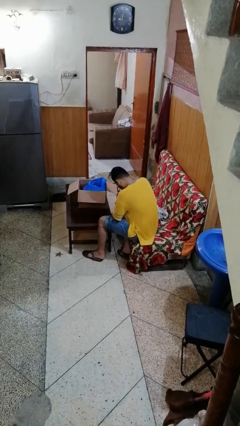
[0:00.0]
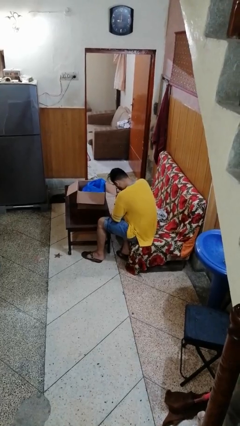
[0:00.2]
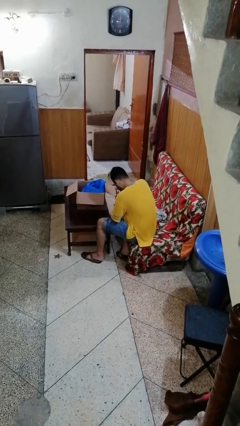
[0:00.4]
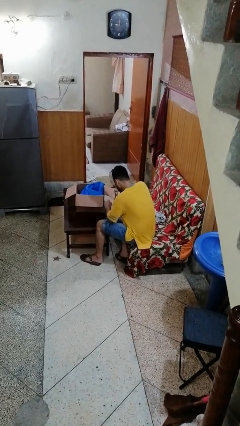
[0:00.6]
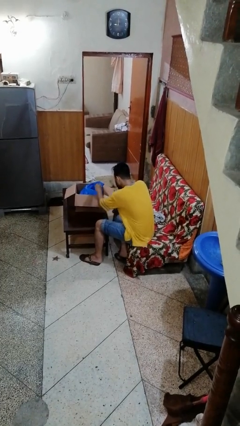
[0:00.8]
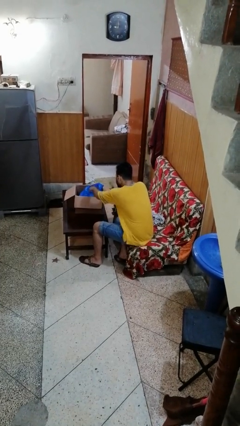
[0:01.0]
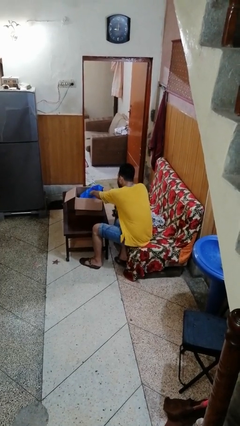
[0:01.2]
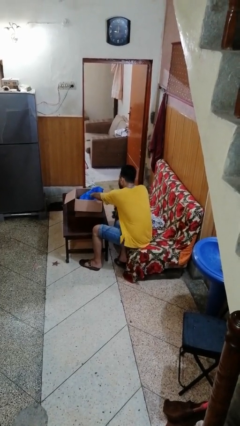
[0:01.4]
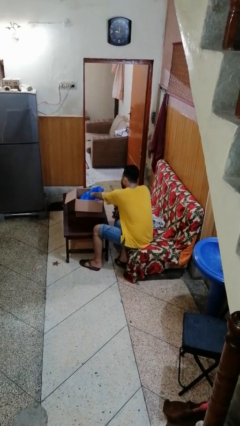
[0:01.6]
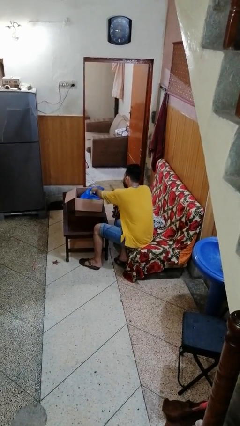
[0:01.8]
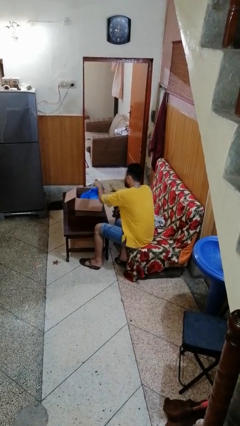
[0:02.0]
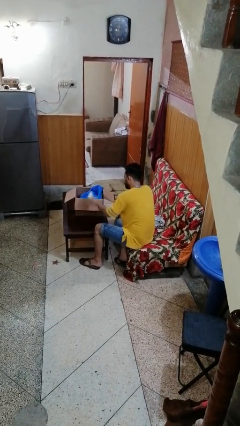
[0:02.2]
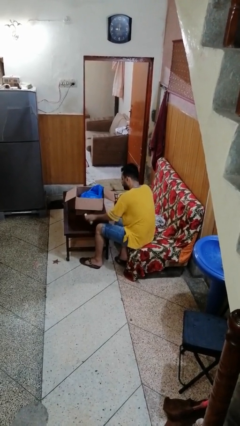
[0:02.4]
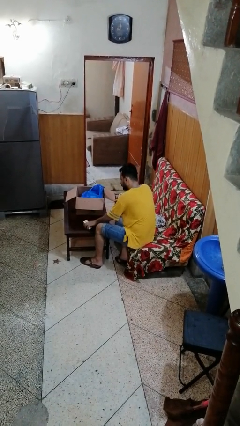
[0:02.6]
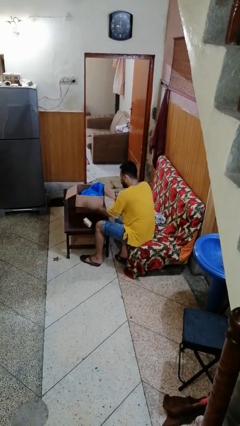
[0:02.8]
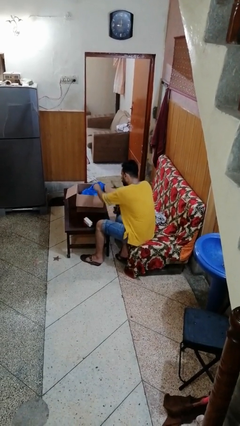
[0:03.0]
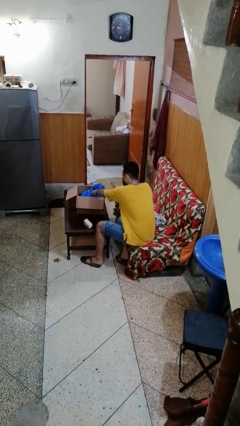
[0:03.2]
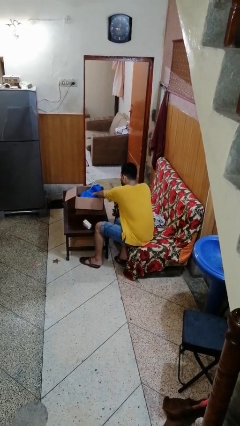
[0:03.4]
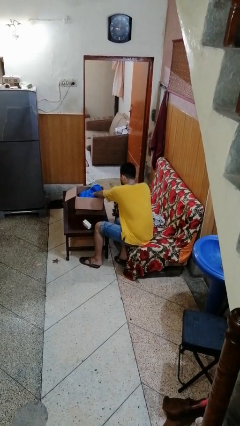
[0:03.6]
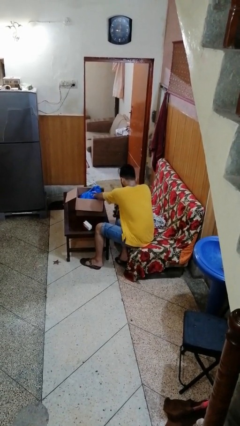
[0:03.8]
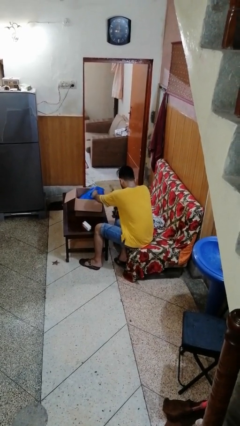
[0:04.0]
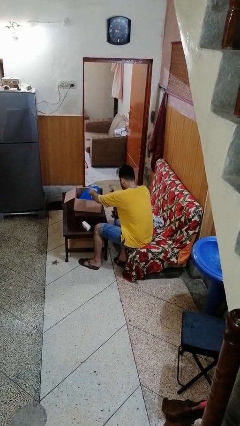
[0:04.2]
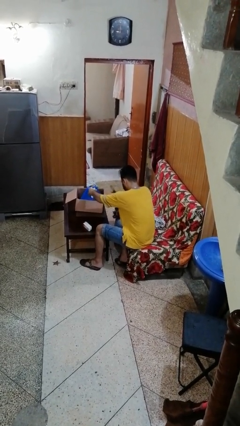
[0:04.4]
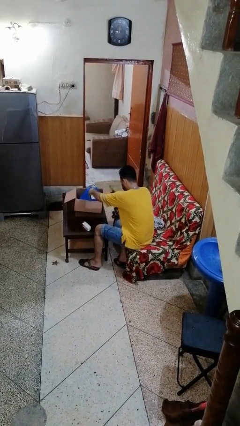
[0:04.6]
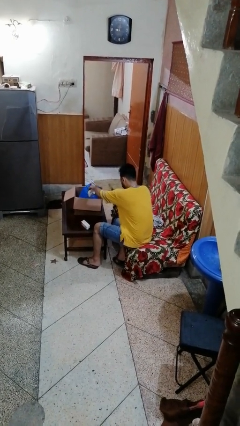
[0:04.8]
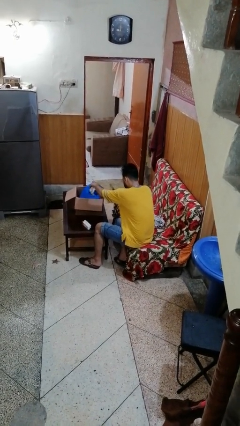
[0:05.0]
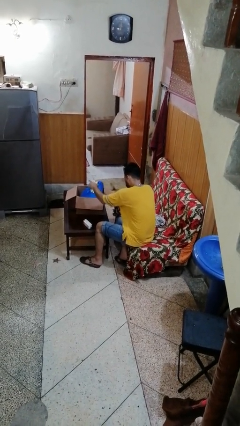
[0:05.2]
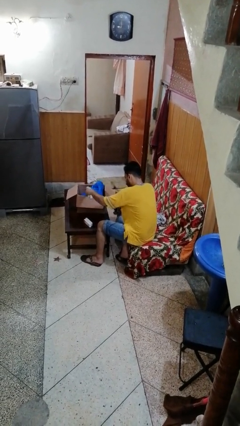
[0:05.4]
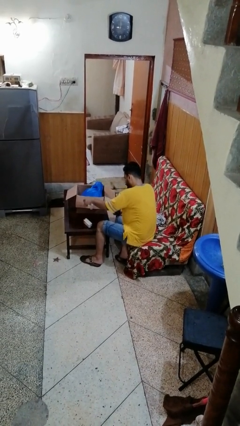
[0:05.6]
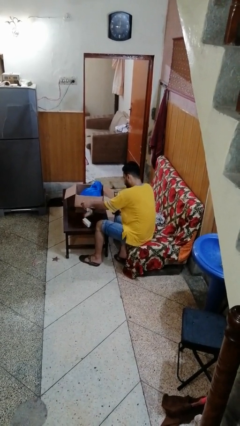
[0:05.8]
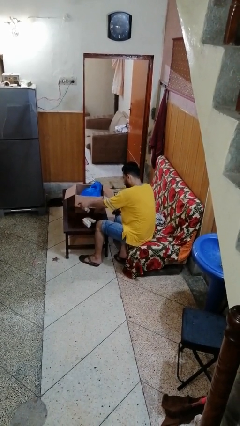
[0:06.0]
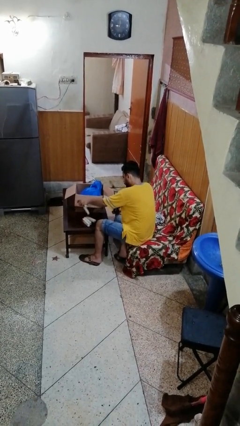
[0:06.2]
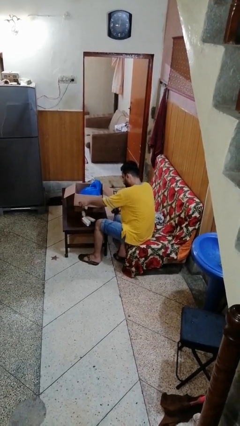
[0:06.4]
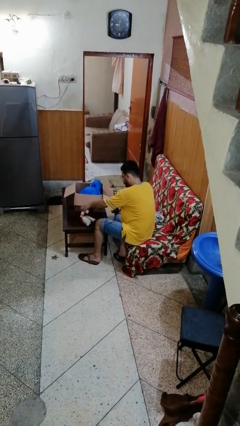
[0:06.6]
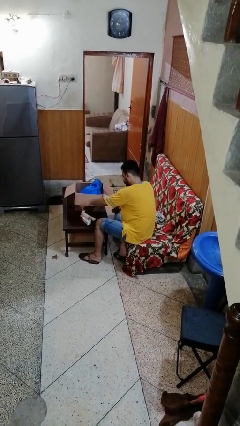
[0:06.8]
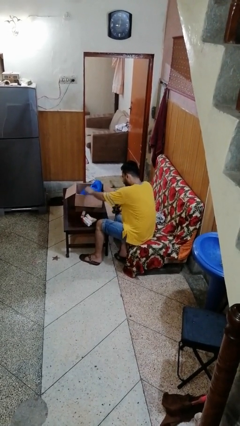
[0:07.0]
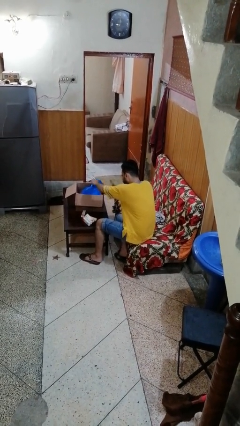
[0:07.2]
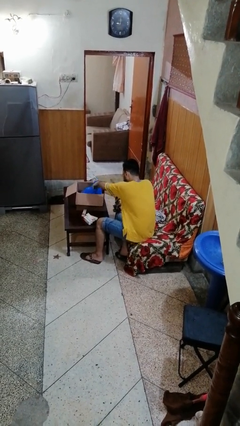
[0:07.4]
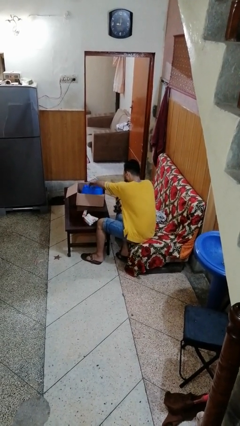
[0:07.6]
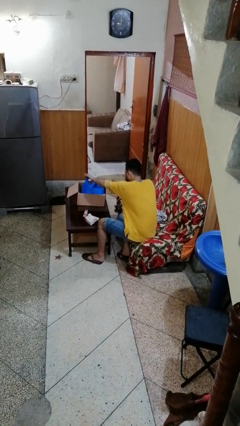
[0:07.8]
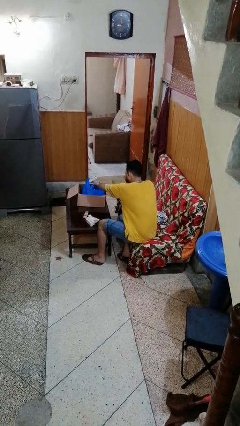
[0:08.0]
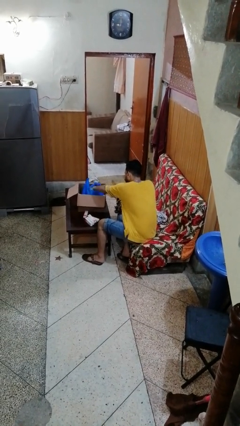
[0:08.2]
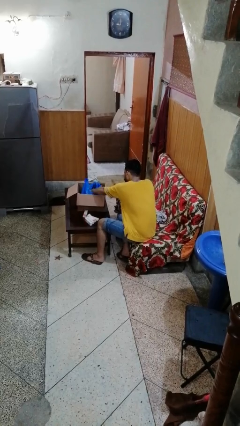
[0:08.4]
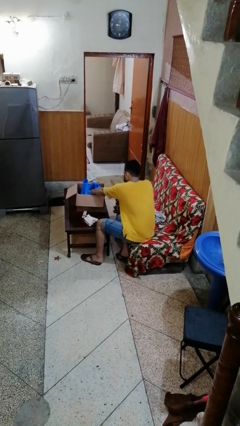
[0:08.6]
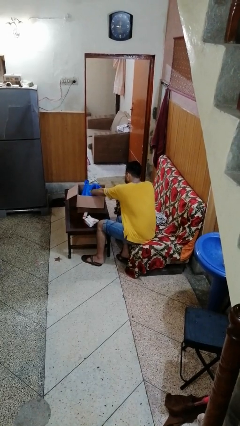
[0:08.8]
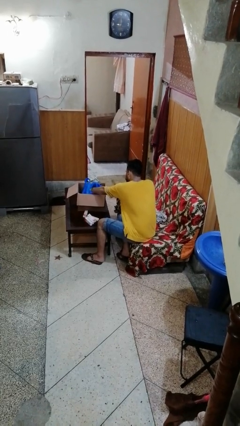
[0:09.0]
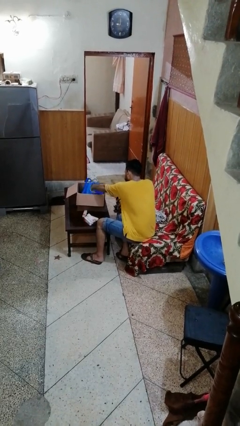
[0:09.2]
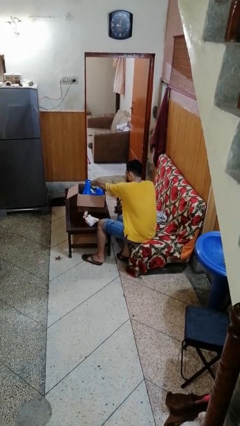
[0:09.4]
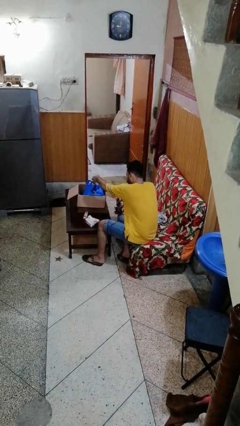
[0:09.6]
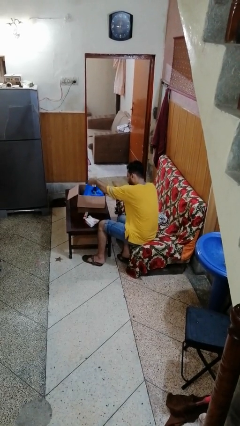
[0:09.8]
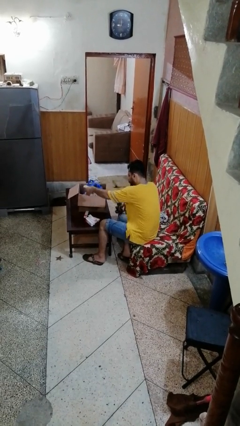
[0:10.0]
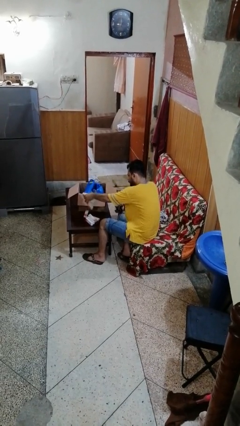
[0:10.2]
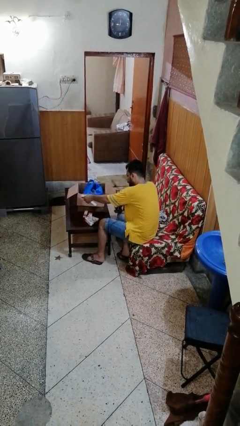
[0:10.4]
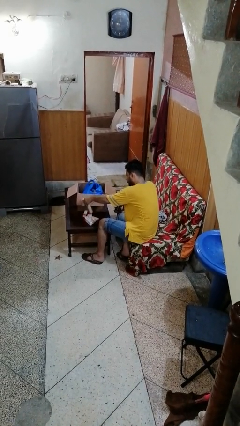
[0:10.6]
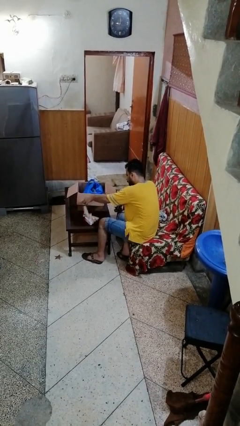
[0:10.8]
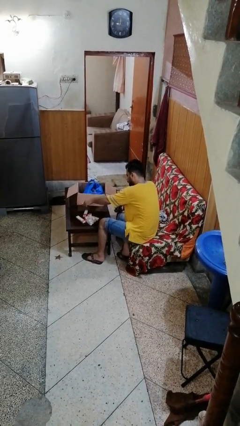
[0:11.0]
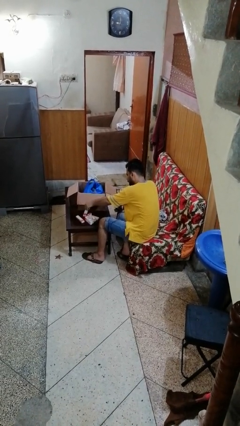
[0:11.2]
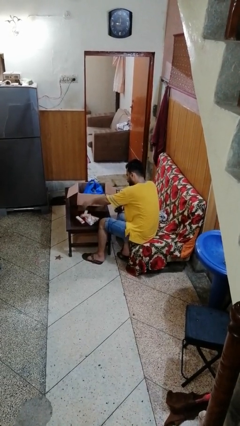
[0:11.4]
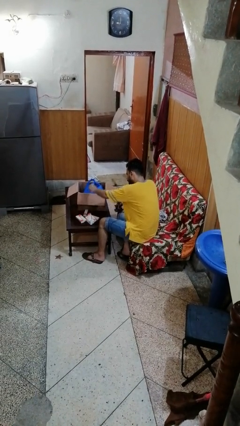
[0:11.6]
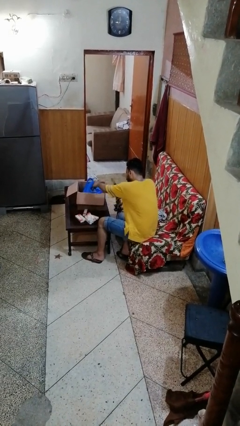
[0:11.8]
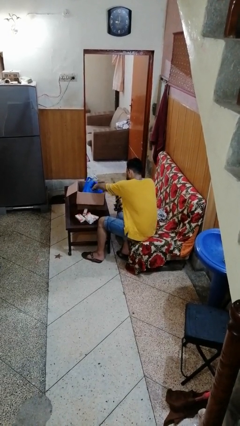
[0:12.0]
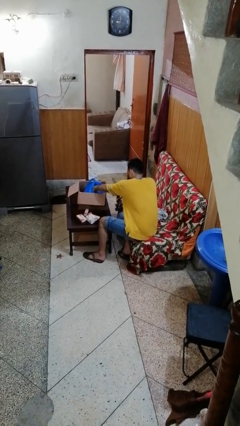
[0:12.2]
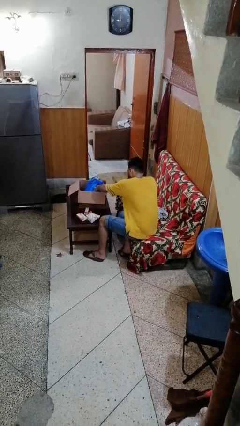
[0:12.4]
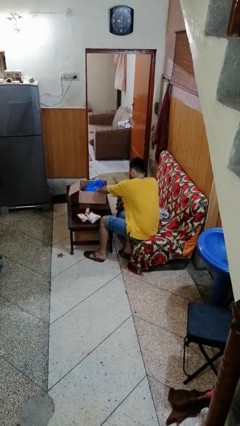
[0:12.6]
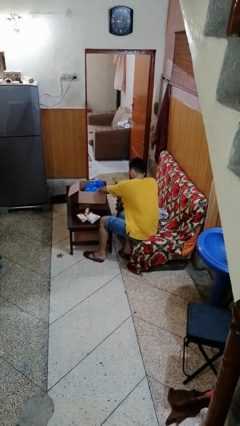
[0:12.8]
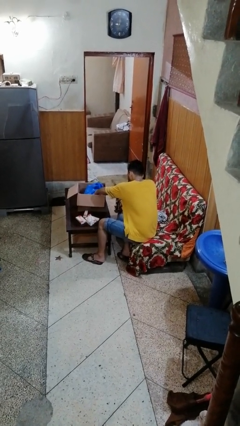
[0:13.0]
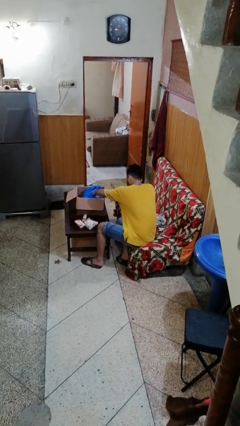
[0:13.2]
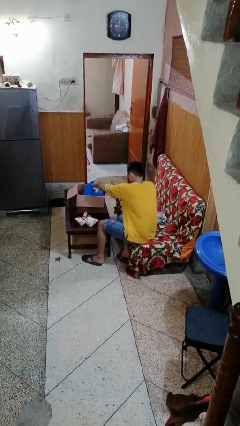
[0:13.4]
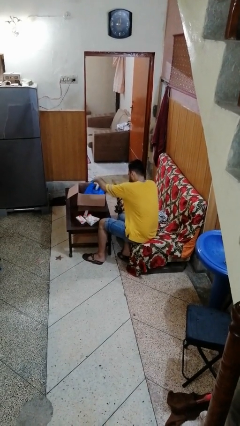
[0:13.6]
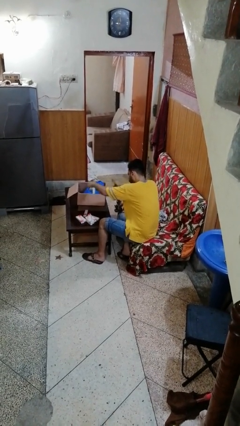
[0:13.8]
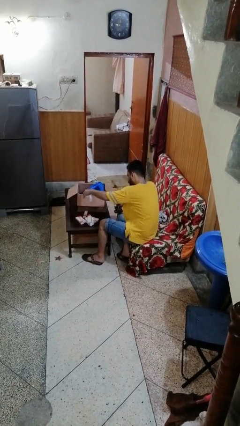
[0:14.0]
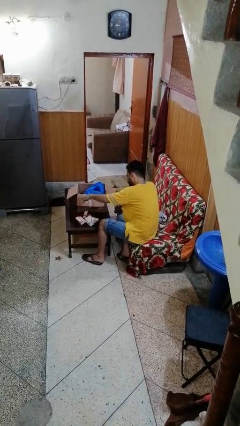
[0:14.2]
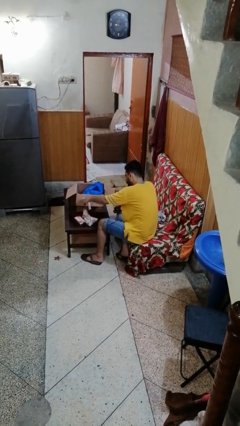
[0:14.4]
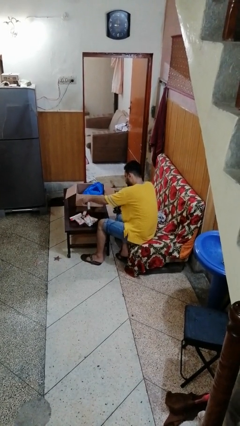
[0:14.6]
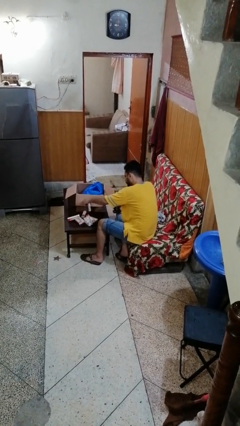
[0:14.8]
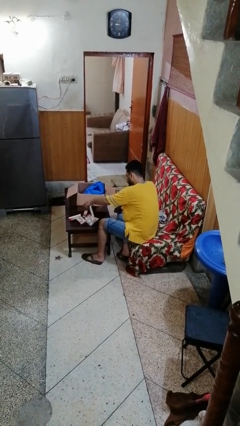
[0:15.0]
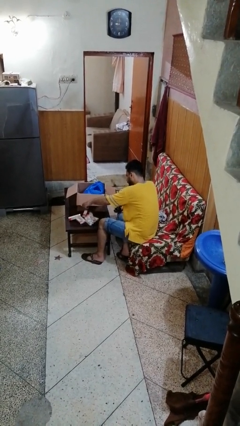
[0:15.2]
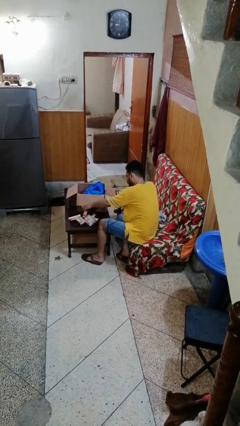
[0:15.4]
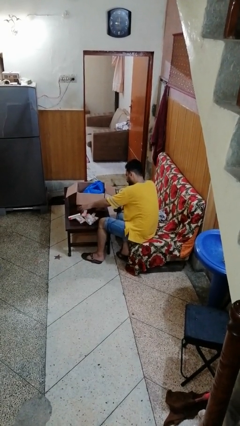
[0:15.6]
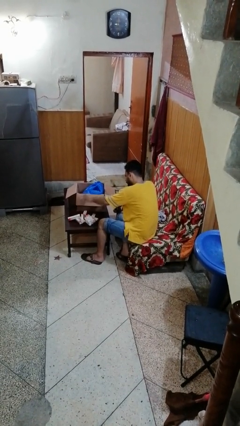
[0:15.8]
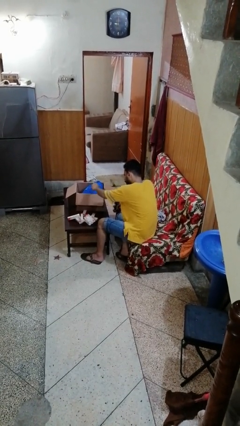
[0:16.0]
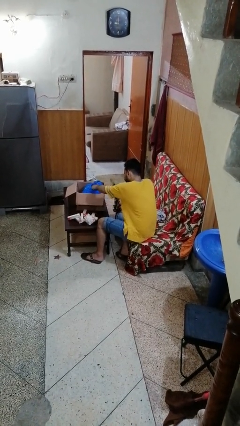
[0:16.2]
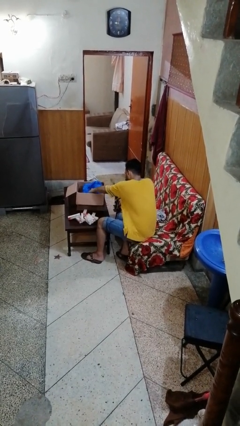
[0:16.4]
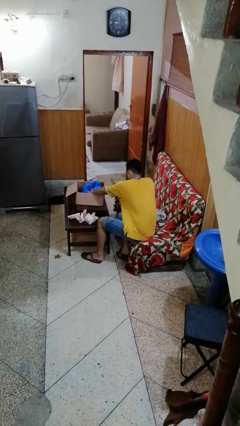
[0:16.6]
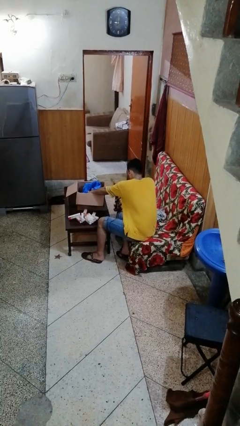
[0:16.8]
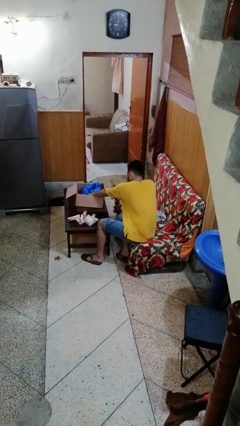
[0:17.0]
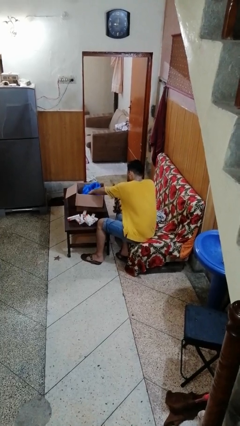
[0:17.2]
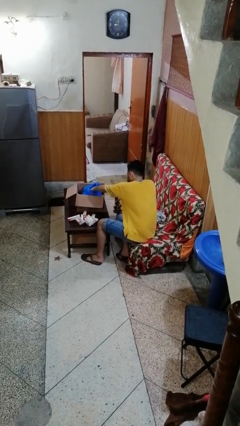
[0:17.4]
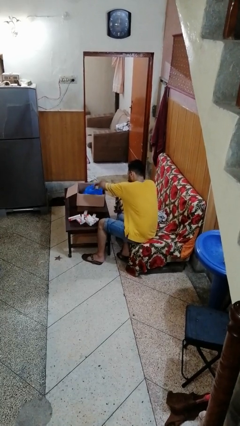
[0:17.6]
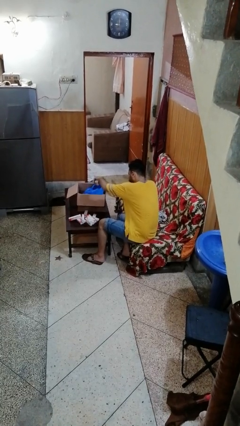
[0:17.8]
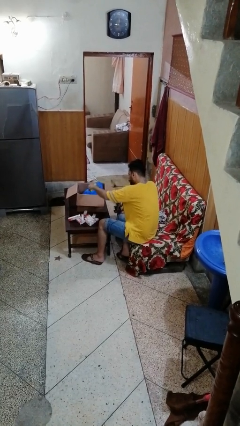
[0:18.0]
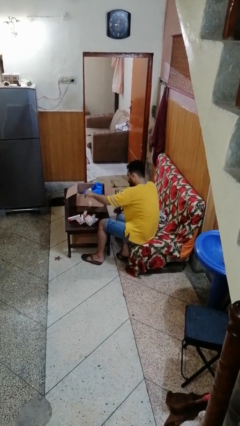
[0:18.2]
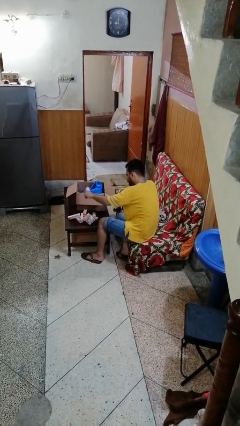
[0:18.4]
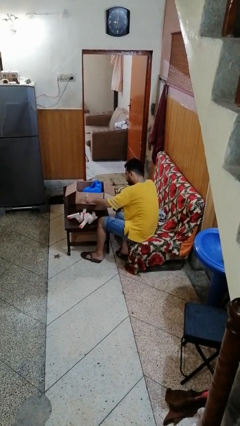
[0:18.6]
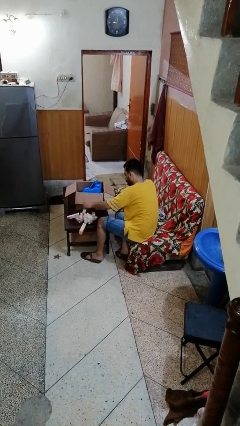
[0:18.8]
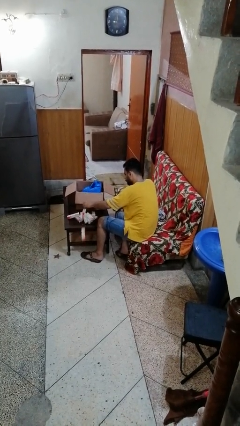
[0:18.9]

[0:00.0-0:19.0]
person unloads box onto table
